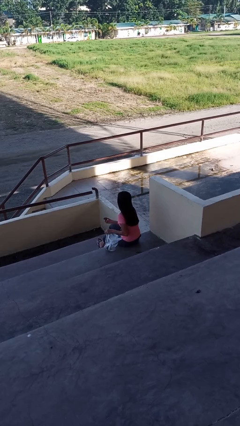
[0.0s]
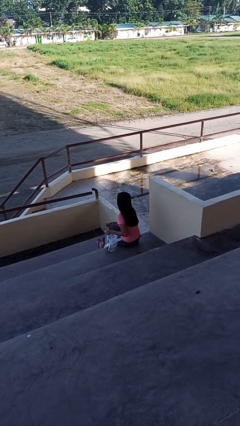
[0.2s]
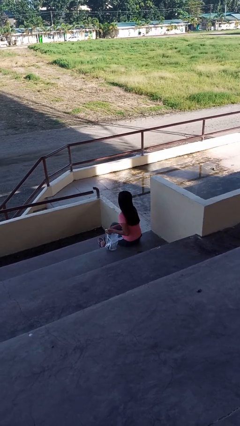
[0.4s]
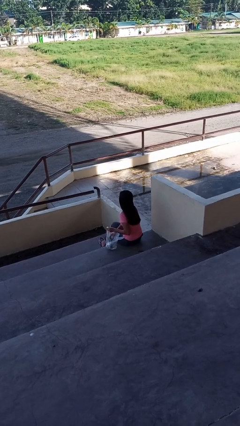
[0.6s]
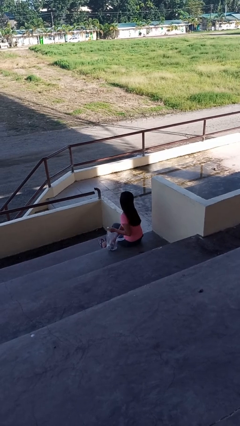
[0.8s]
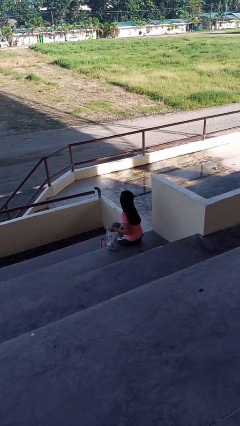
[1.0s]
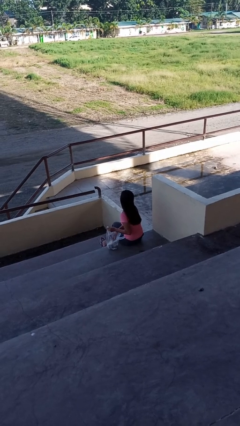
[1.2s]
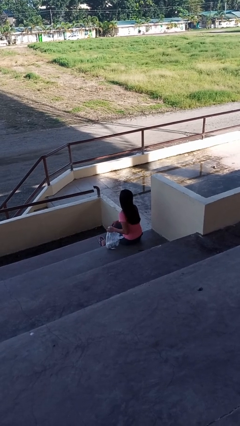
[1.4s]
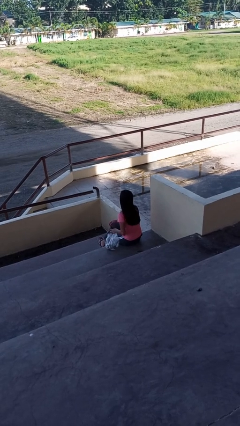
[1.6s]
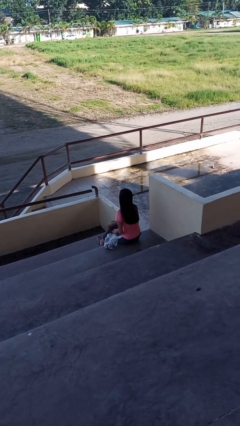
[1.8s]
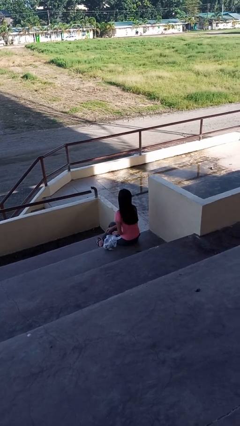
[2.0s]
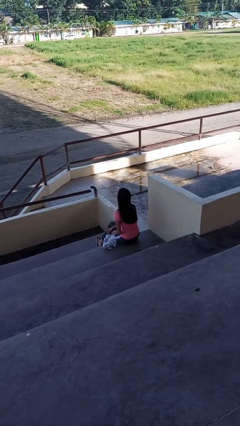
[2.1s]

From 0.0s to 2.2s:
person puts object into bag

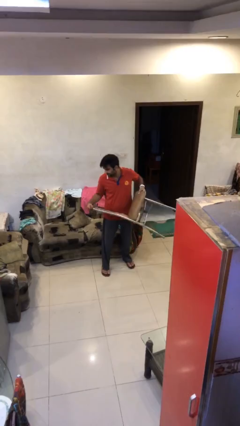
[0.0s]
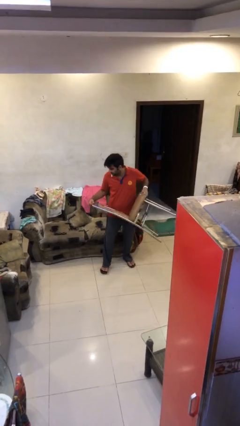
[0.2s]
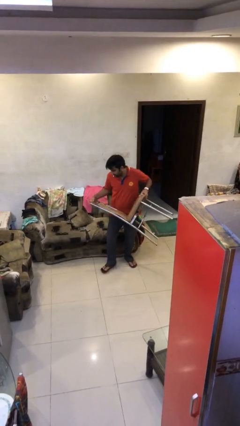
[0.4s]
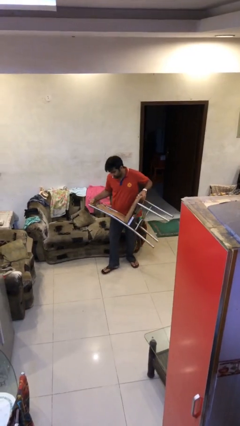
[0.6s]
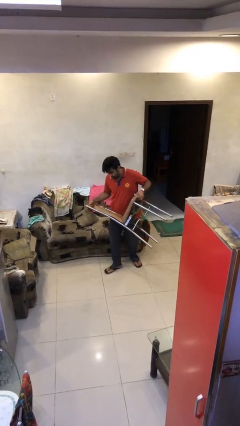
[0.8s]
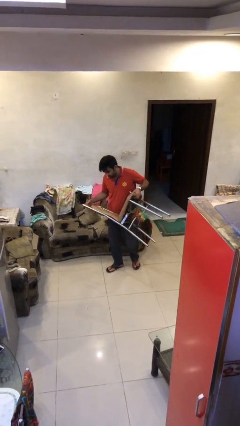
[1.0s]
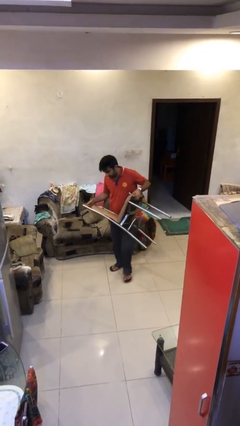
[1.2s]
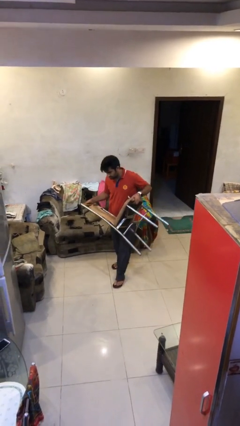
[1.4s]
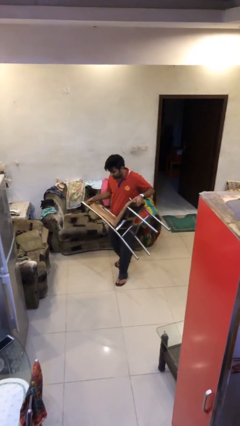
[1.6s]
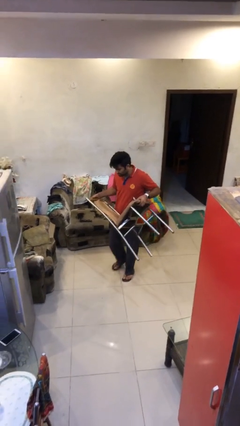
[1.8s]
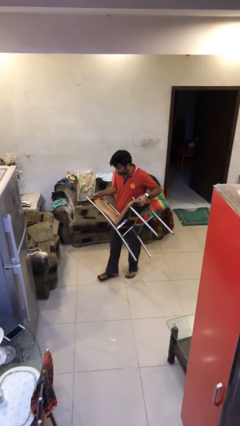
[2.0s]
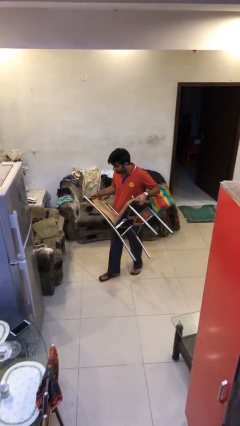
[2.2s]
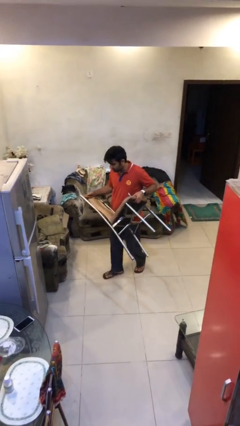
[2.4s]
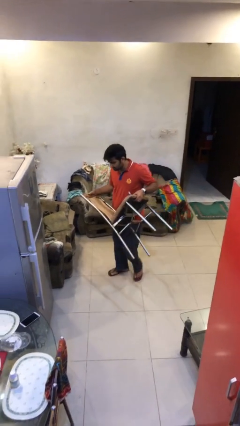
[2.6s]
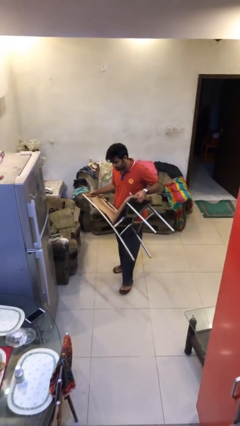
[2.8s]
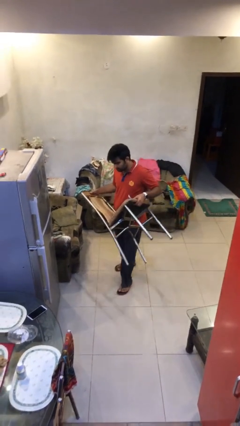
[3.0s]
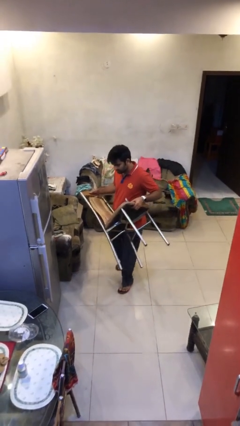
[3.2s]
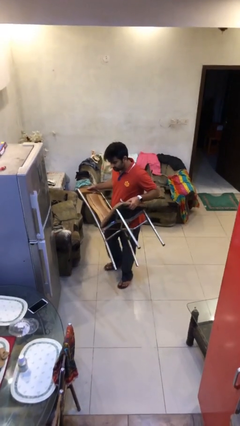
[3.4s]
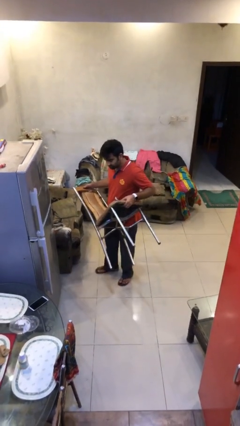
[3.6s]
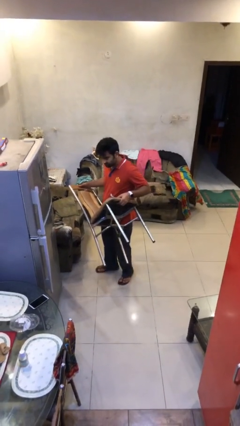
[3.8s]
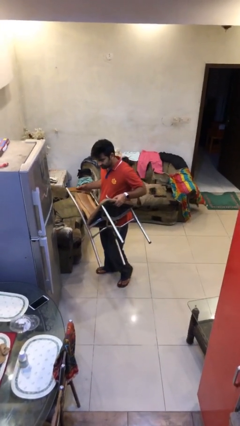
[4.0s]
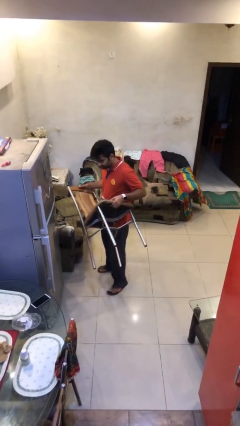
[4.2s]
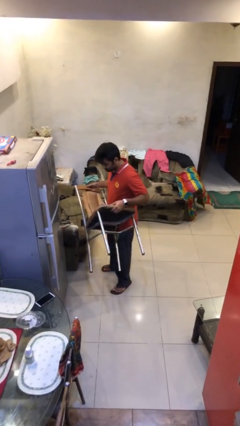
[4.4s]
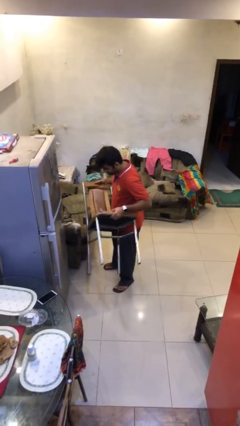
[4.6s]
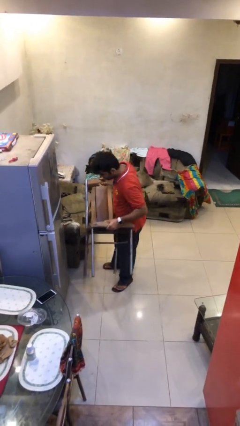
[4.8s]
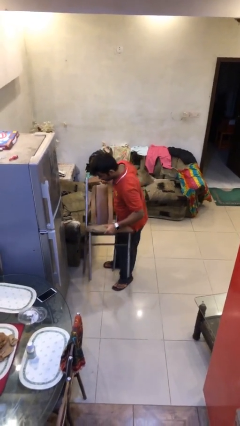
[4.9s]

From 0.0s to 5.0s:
person carries heavy object

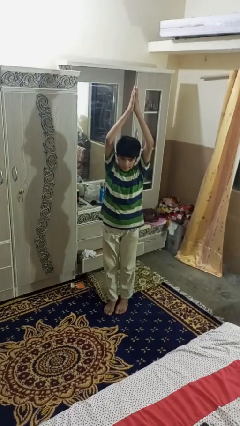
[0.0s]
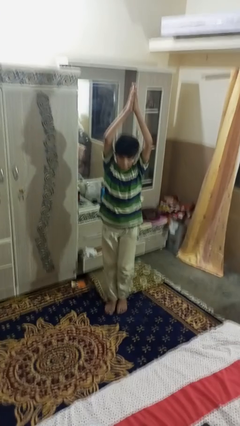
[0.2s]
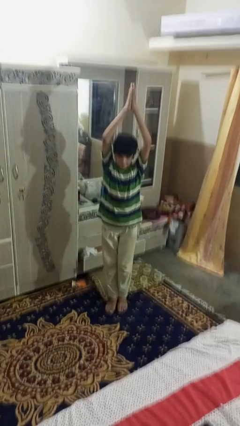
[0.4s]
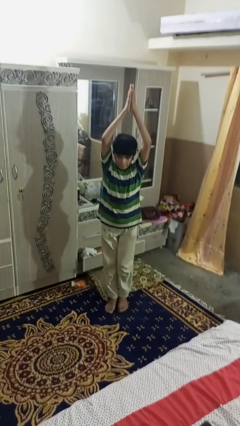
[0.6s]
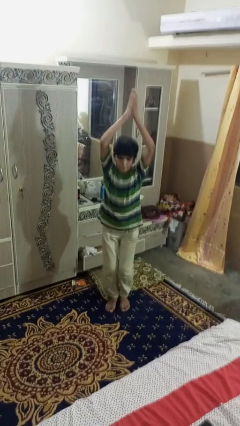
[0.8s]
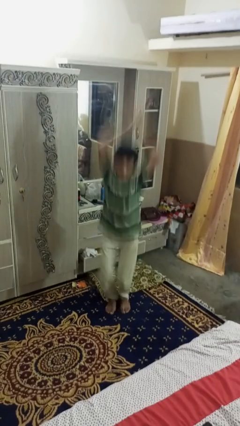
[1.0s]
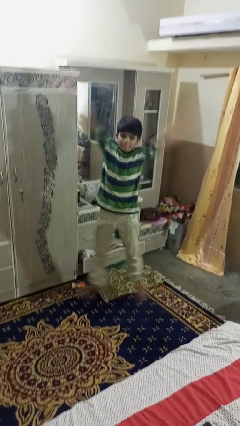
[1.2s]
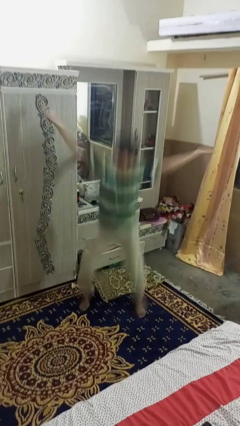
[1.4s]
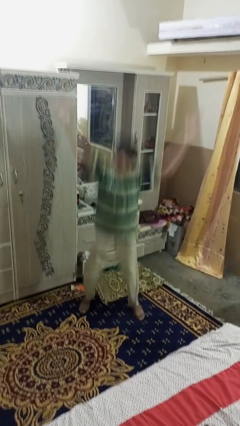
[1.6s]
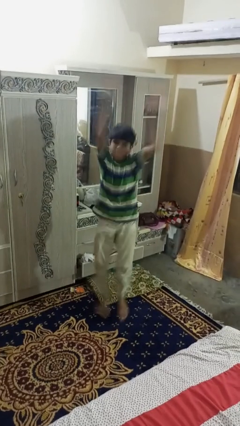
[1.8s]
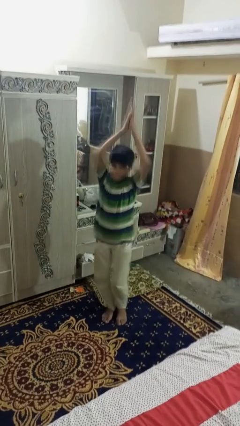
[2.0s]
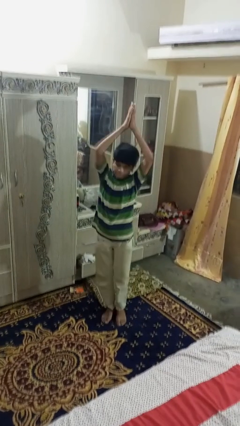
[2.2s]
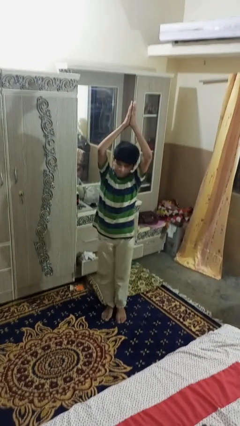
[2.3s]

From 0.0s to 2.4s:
person exercises with jumping jacks

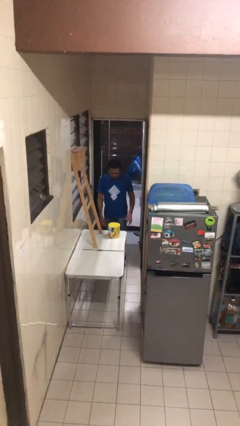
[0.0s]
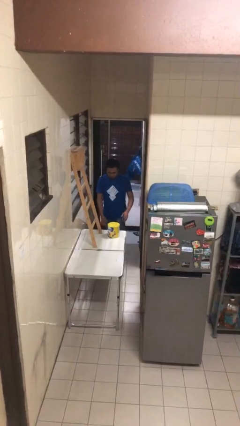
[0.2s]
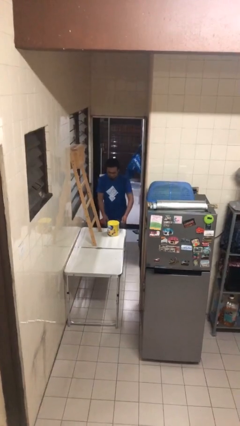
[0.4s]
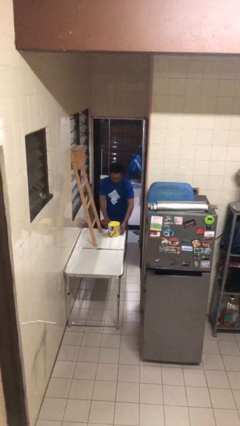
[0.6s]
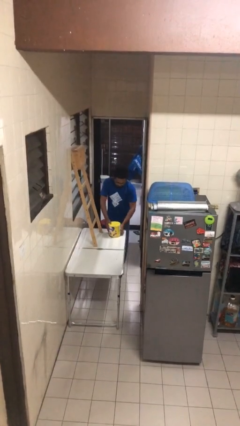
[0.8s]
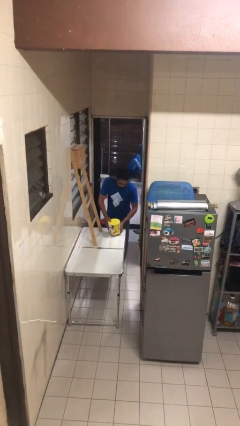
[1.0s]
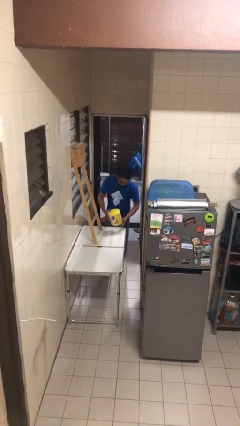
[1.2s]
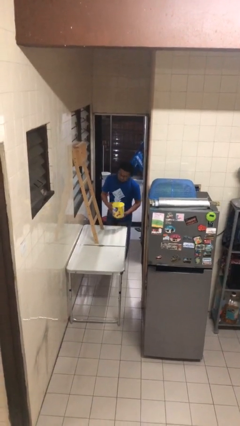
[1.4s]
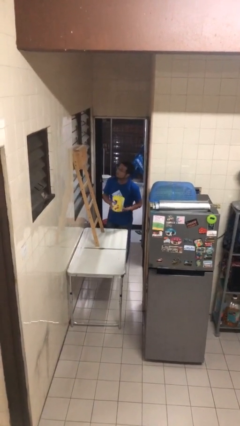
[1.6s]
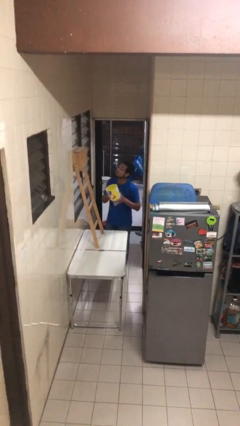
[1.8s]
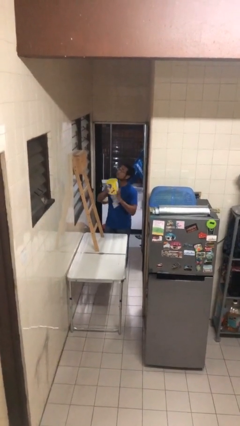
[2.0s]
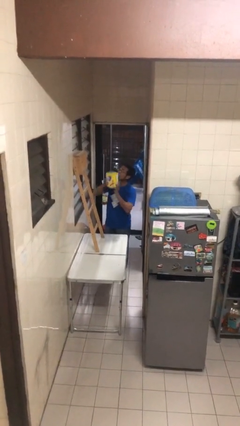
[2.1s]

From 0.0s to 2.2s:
person picks up object from table

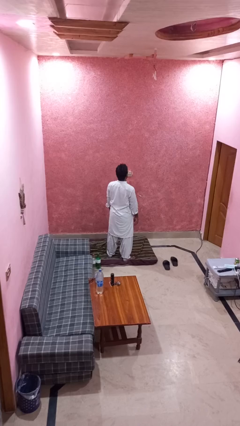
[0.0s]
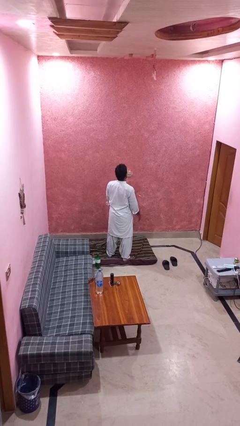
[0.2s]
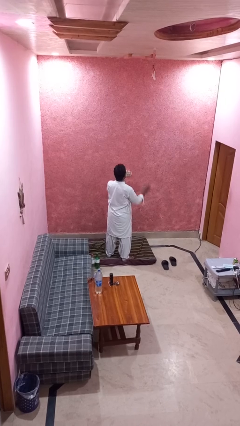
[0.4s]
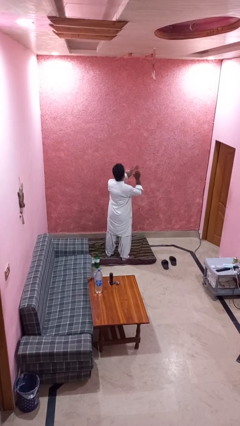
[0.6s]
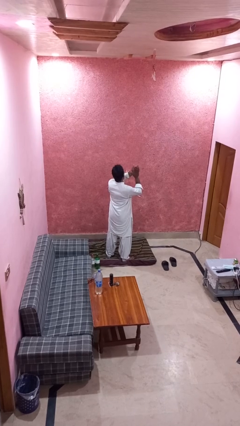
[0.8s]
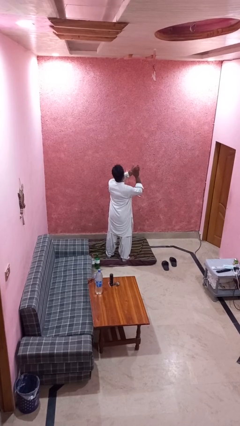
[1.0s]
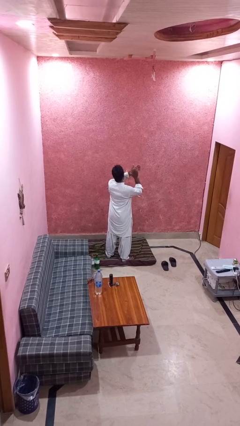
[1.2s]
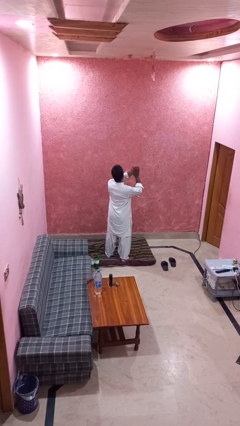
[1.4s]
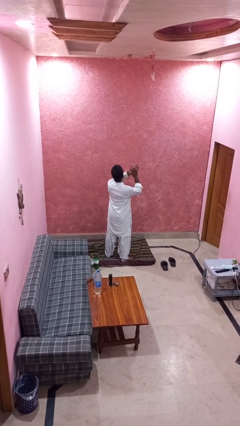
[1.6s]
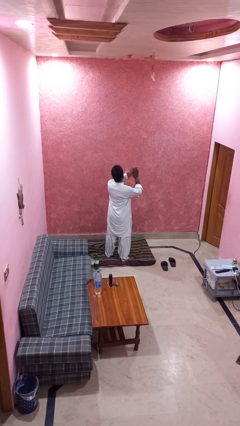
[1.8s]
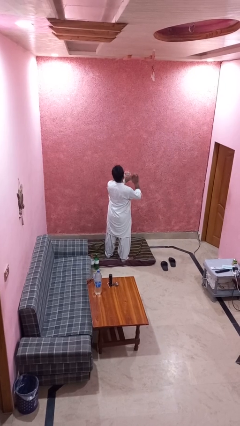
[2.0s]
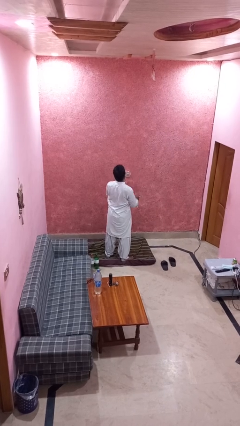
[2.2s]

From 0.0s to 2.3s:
person claps hands

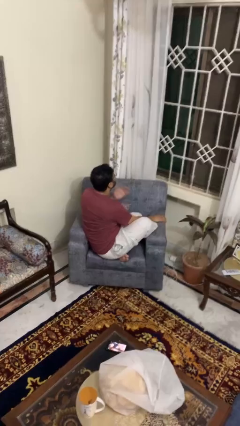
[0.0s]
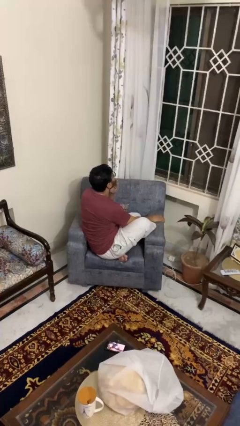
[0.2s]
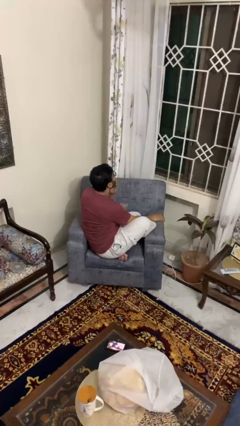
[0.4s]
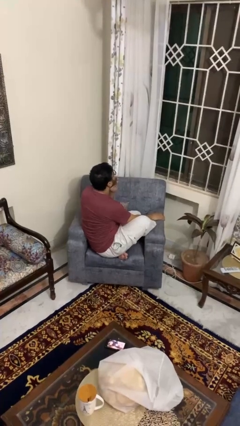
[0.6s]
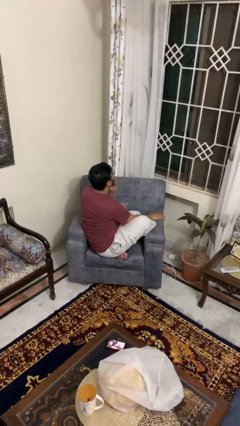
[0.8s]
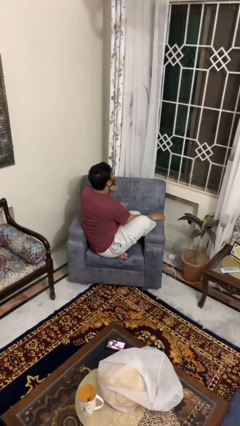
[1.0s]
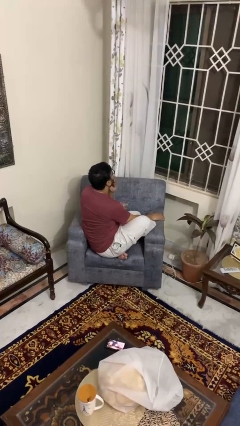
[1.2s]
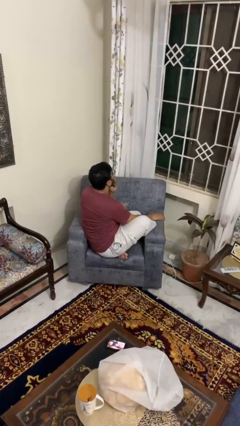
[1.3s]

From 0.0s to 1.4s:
person strokes chin

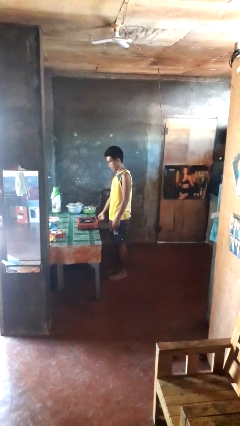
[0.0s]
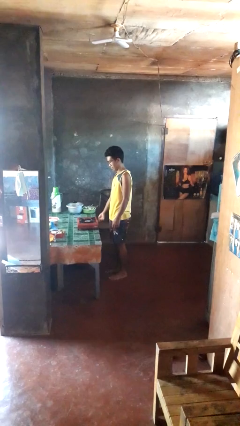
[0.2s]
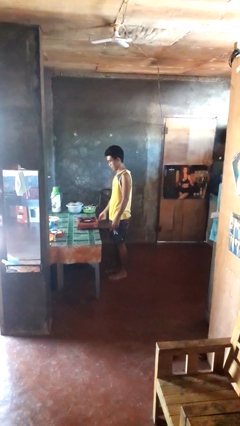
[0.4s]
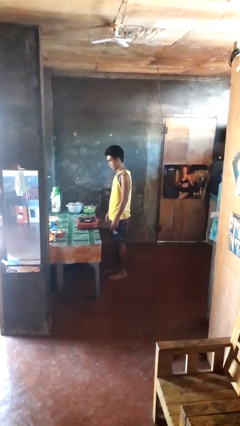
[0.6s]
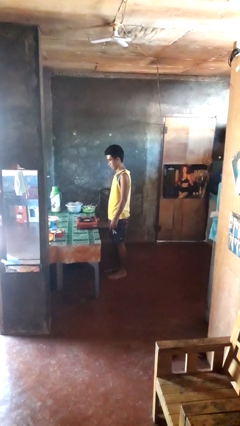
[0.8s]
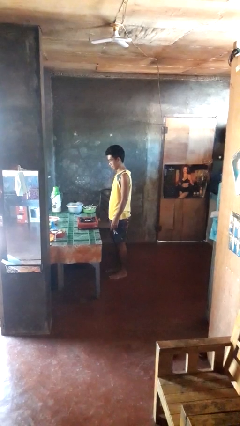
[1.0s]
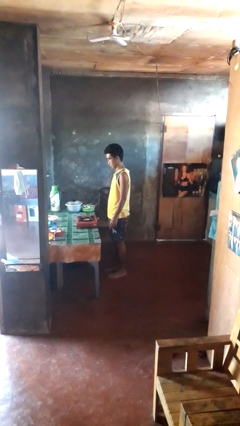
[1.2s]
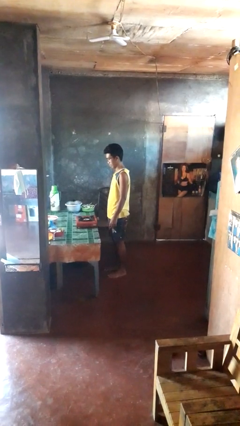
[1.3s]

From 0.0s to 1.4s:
person turns off stovetop
